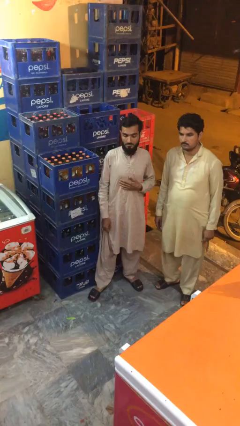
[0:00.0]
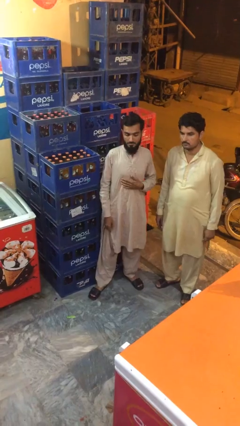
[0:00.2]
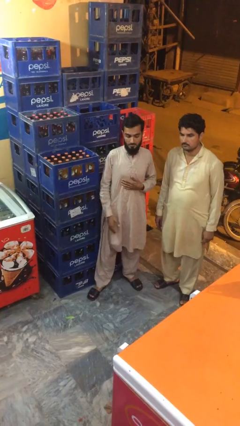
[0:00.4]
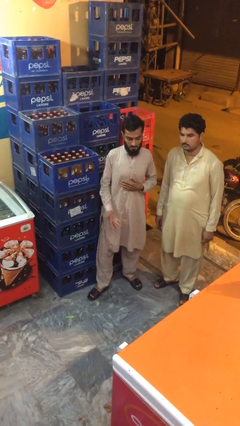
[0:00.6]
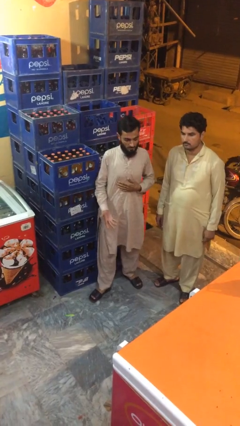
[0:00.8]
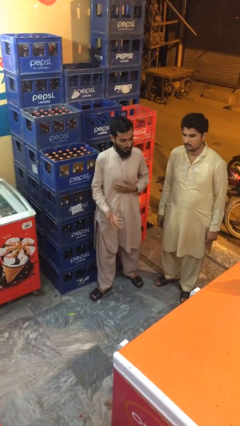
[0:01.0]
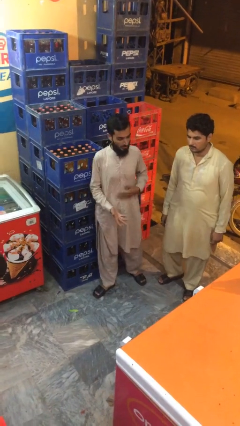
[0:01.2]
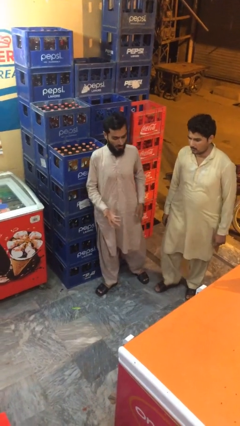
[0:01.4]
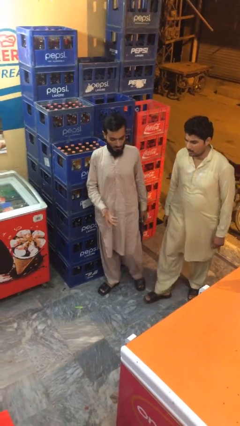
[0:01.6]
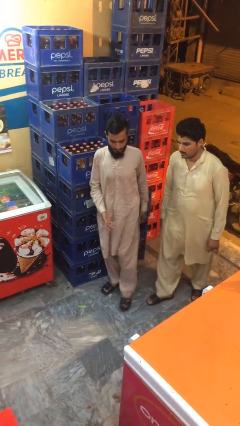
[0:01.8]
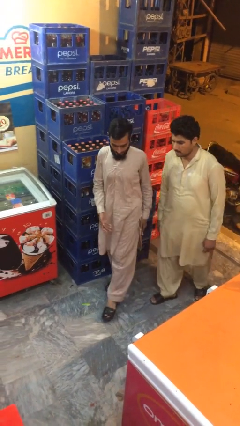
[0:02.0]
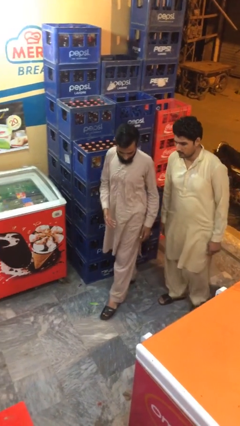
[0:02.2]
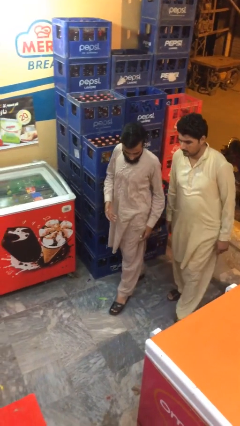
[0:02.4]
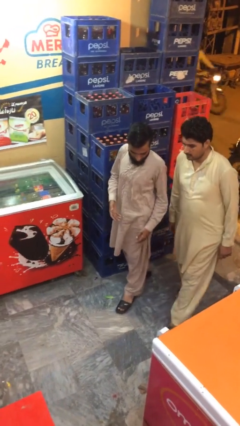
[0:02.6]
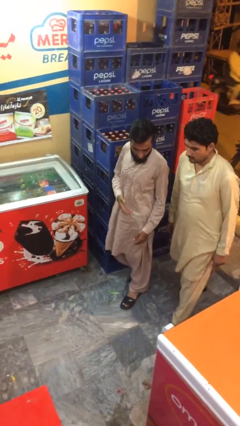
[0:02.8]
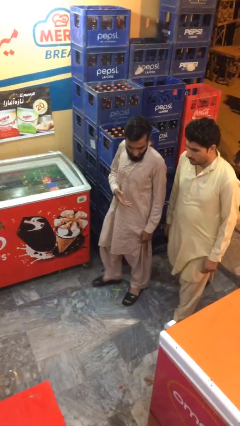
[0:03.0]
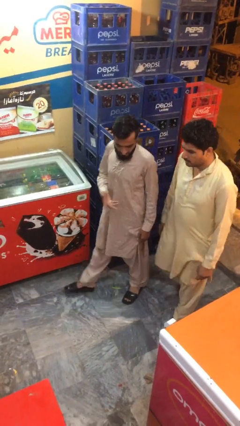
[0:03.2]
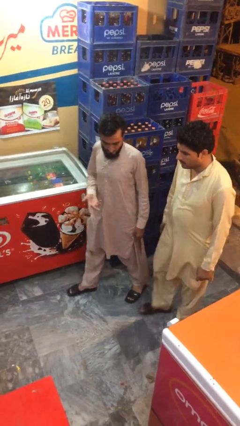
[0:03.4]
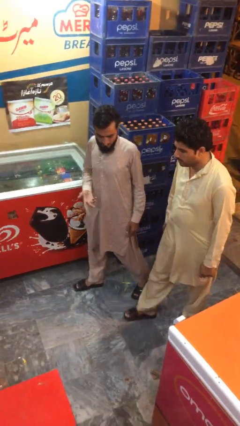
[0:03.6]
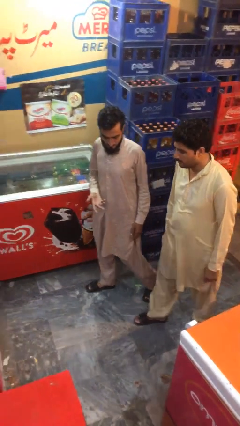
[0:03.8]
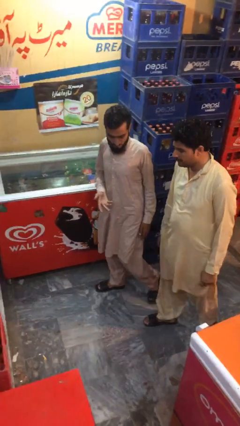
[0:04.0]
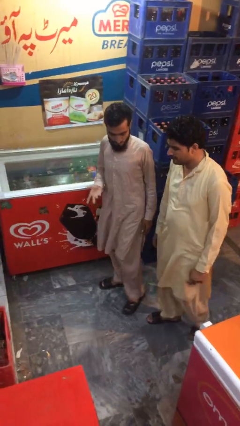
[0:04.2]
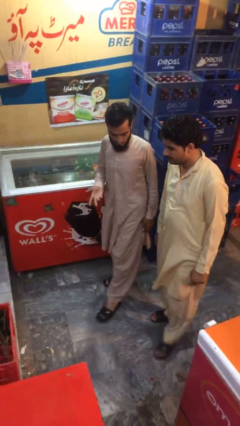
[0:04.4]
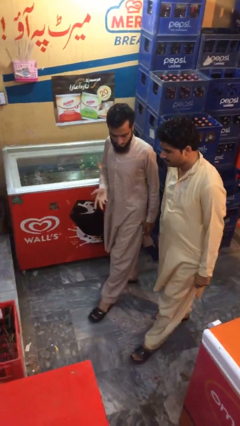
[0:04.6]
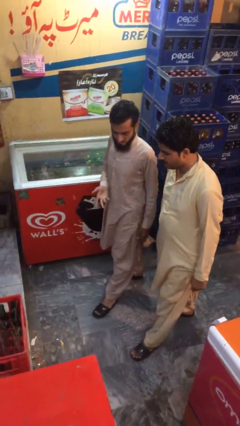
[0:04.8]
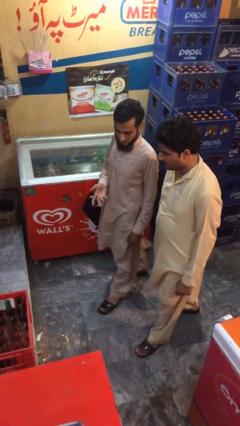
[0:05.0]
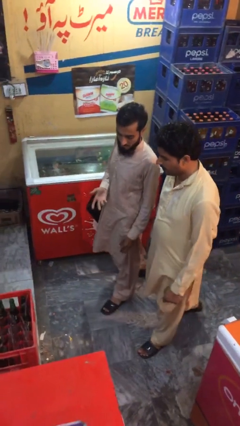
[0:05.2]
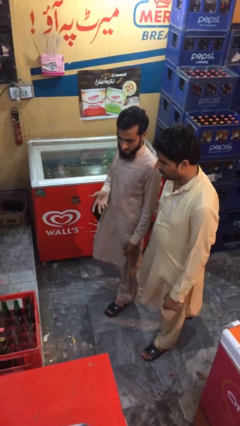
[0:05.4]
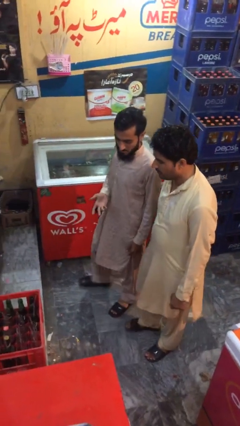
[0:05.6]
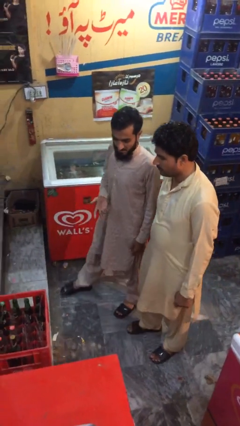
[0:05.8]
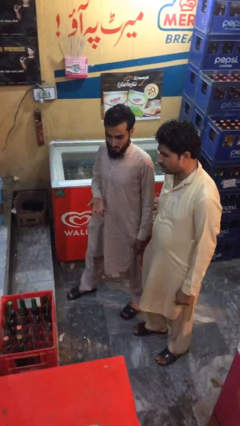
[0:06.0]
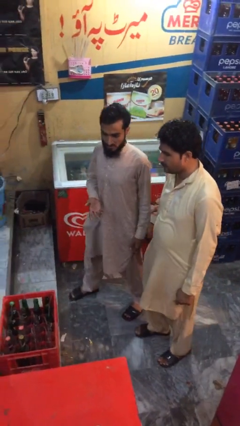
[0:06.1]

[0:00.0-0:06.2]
person talks to person

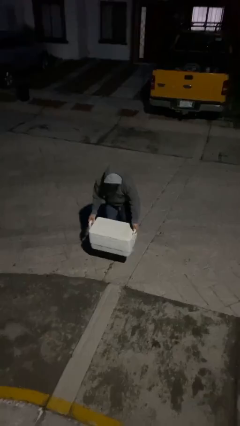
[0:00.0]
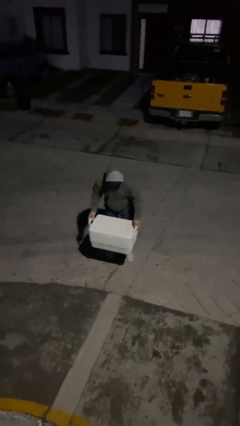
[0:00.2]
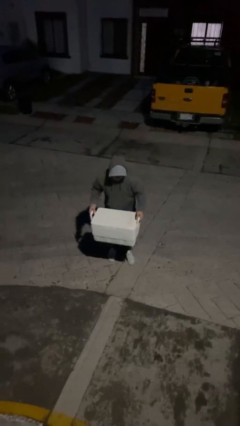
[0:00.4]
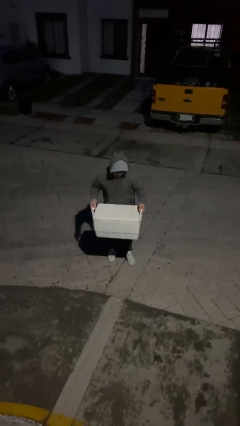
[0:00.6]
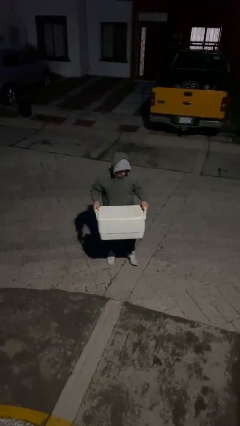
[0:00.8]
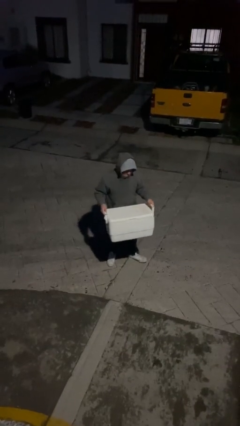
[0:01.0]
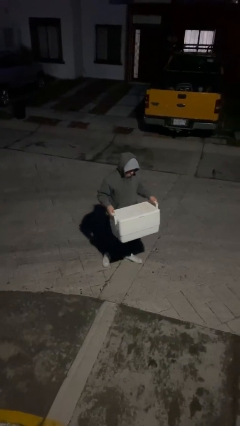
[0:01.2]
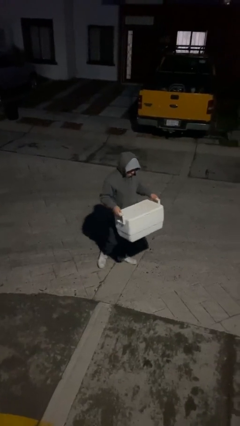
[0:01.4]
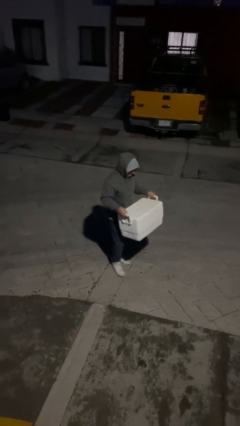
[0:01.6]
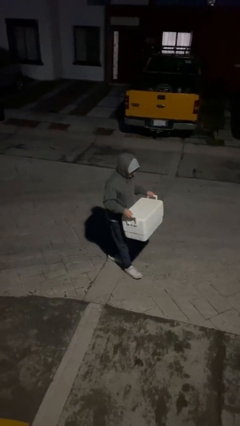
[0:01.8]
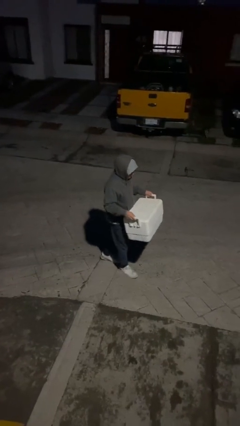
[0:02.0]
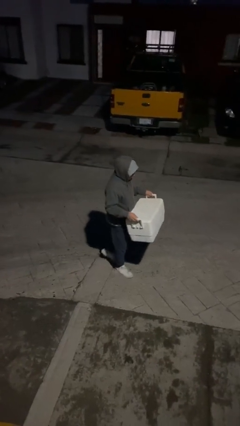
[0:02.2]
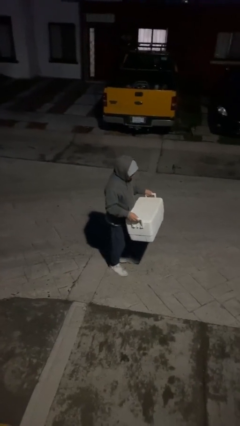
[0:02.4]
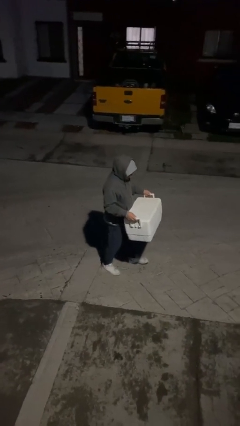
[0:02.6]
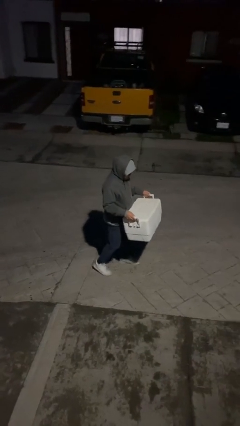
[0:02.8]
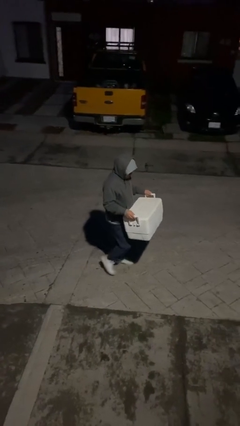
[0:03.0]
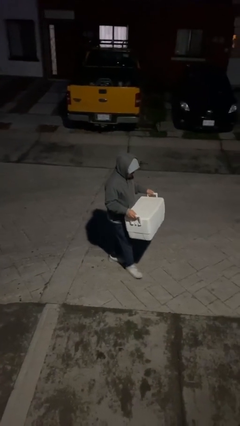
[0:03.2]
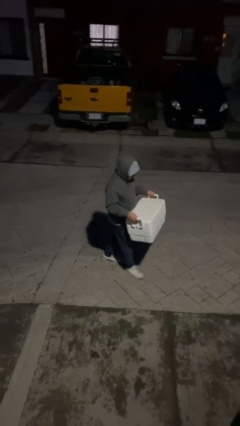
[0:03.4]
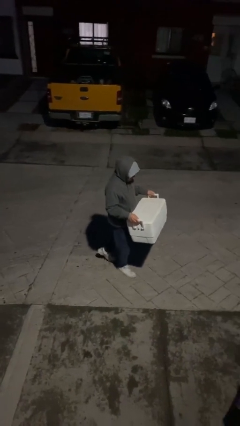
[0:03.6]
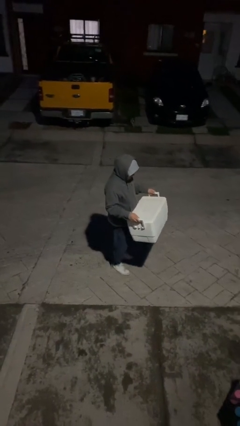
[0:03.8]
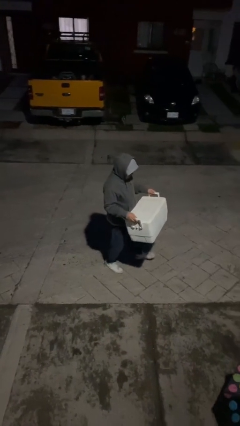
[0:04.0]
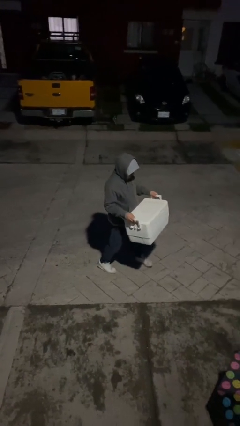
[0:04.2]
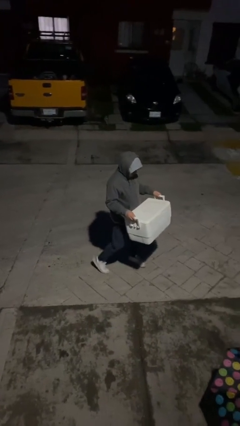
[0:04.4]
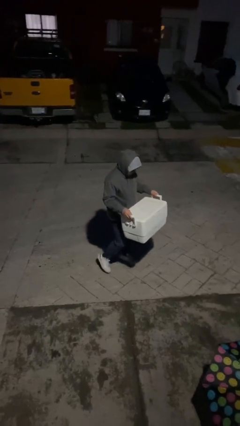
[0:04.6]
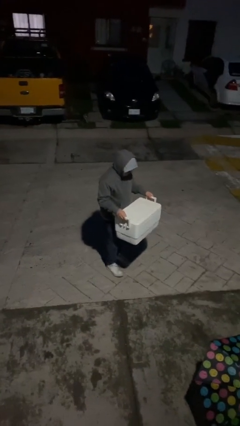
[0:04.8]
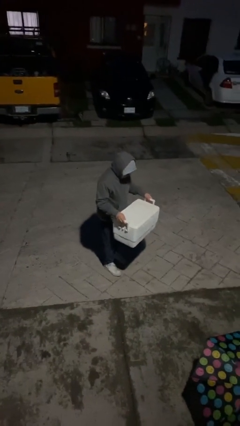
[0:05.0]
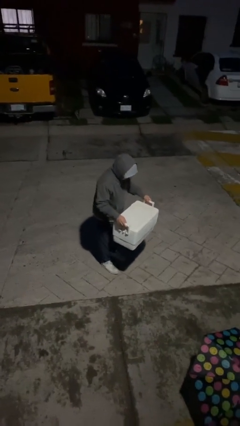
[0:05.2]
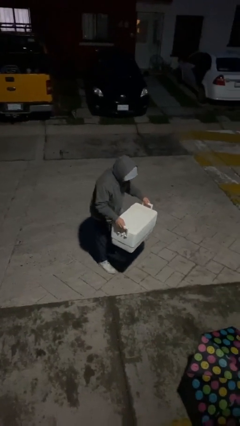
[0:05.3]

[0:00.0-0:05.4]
person carries heavy object

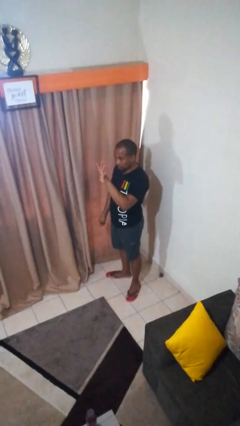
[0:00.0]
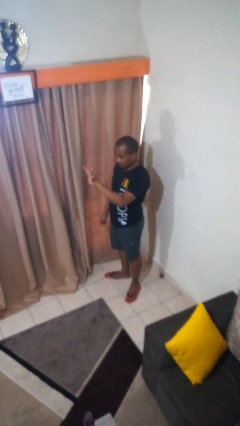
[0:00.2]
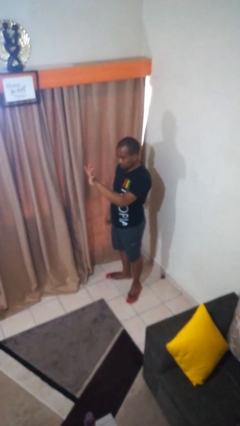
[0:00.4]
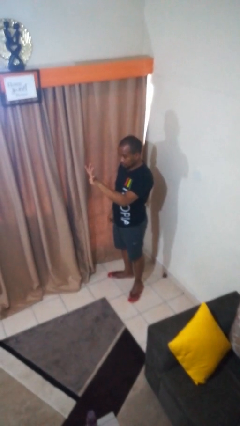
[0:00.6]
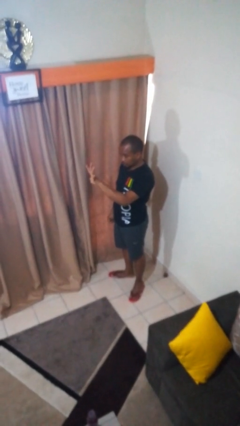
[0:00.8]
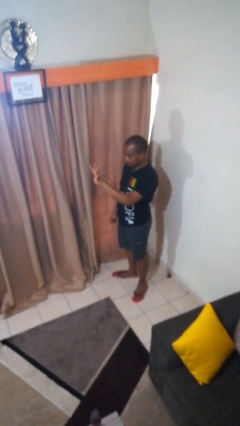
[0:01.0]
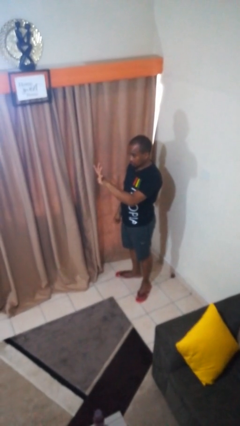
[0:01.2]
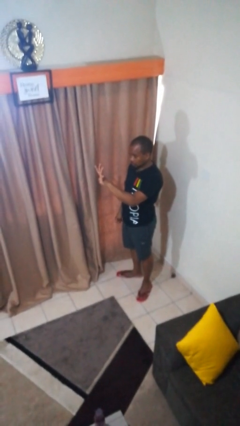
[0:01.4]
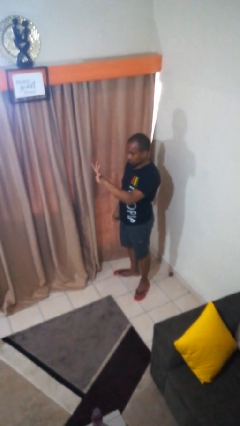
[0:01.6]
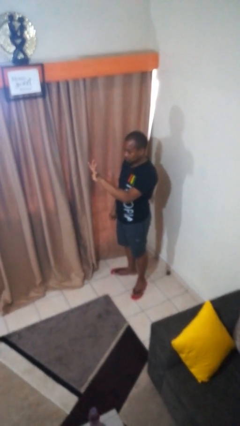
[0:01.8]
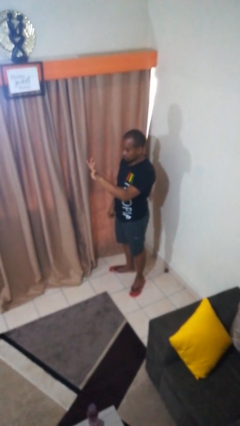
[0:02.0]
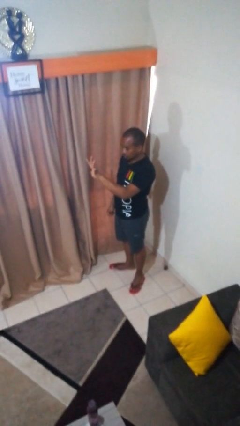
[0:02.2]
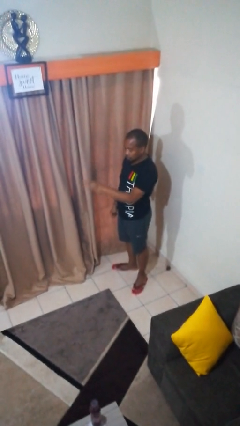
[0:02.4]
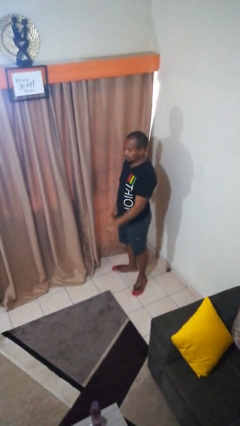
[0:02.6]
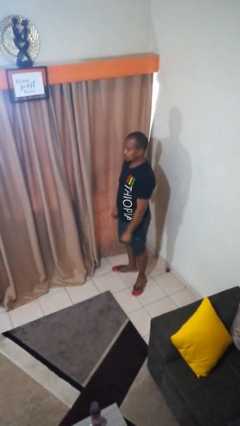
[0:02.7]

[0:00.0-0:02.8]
person gestures number four

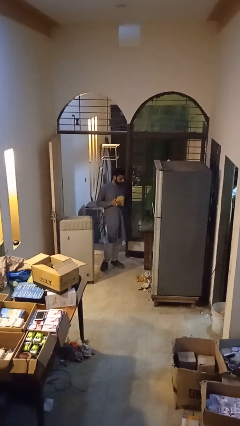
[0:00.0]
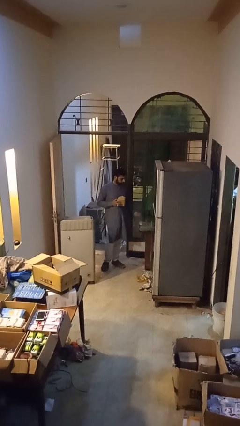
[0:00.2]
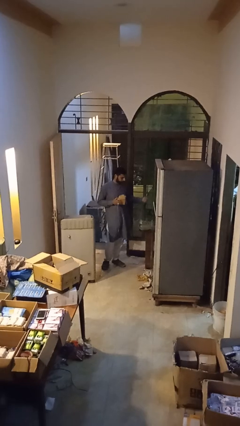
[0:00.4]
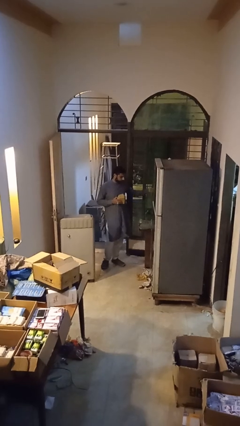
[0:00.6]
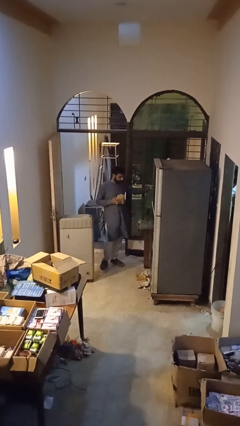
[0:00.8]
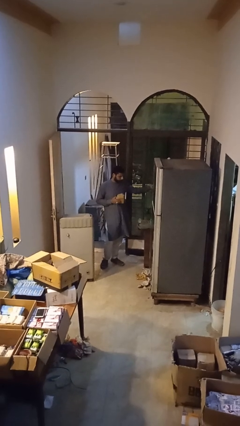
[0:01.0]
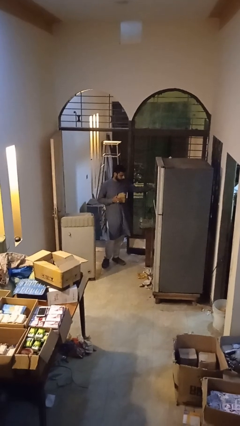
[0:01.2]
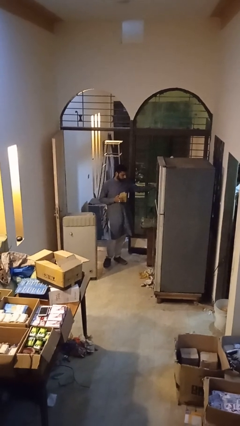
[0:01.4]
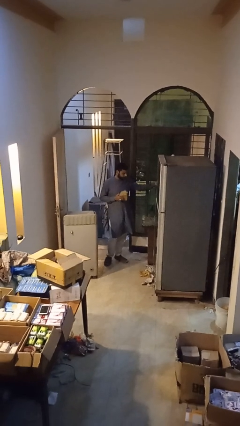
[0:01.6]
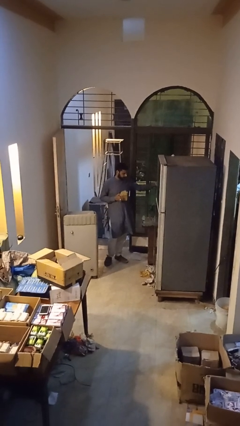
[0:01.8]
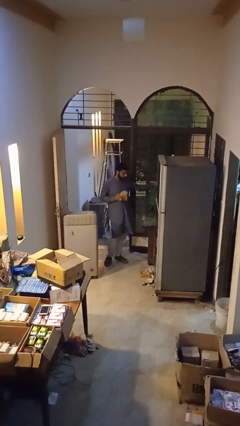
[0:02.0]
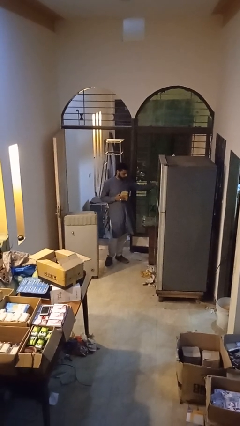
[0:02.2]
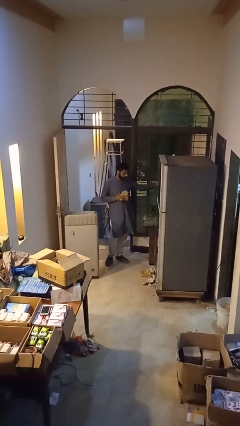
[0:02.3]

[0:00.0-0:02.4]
person plugs into electrical socket

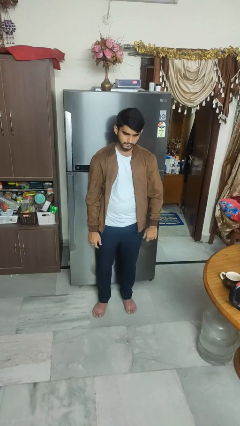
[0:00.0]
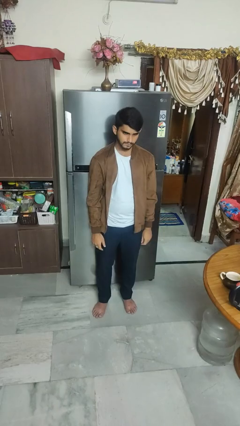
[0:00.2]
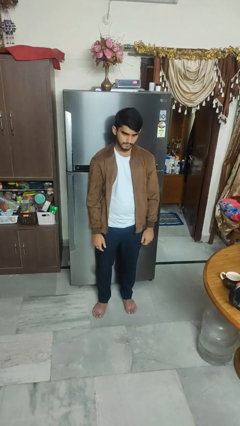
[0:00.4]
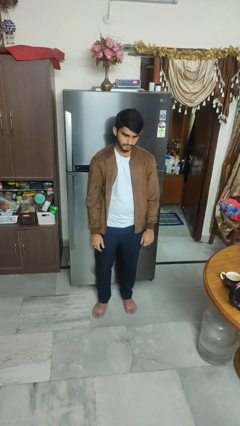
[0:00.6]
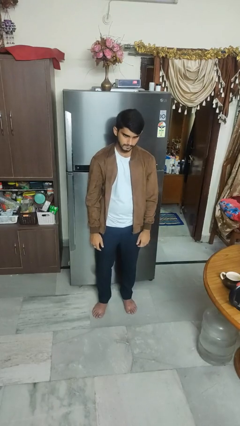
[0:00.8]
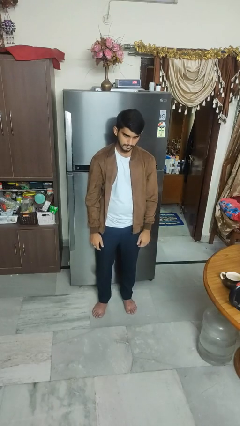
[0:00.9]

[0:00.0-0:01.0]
person gestures call me
